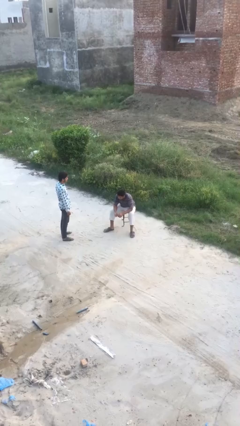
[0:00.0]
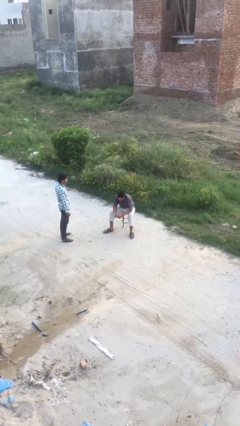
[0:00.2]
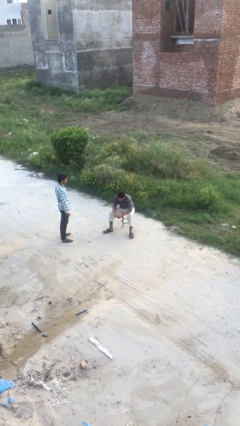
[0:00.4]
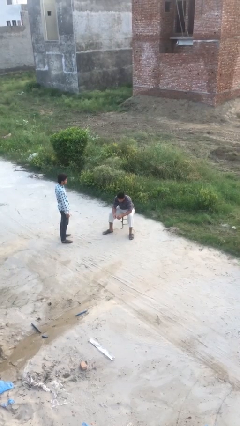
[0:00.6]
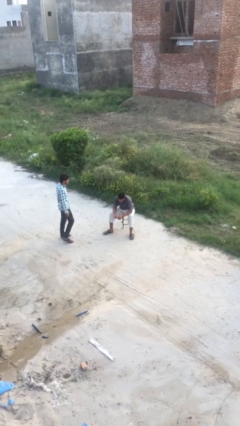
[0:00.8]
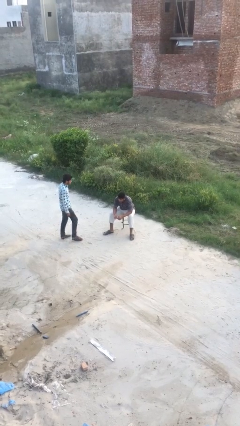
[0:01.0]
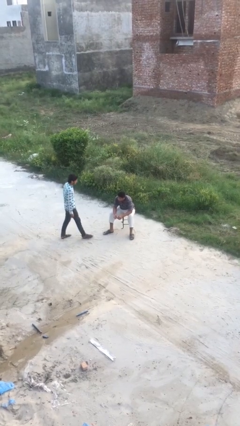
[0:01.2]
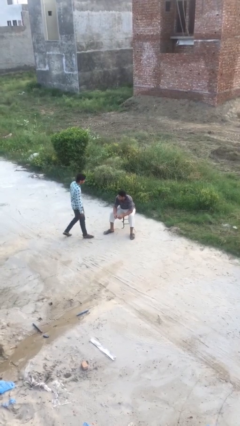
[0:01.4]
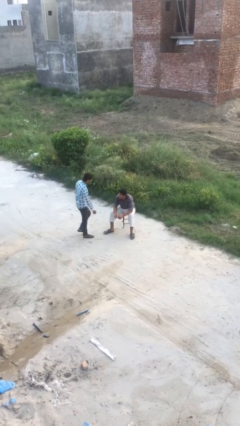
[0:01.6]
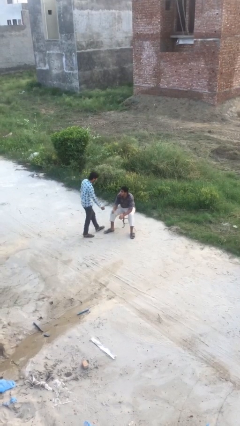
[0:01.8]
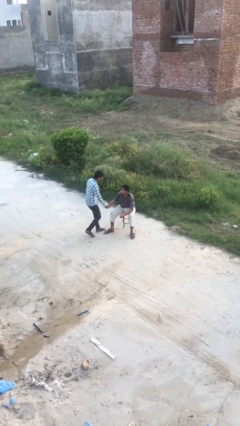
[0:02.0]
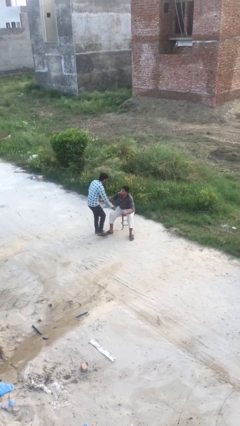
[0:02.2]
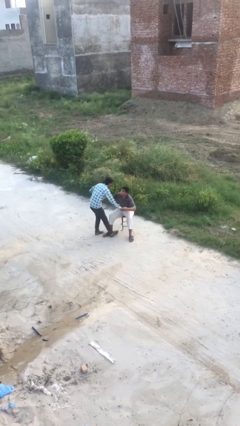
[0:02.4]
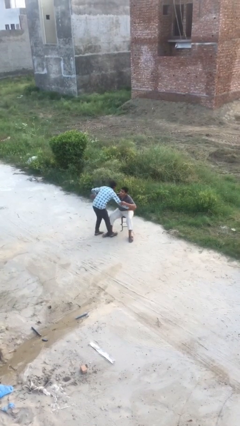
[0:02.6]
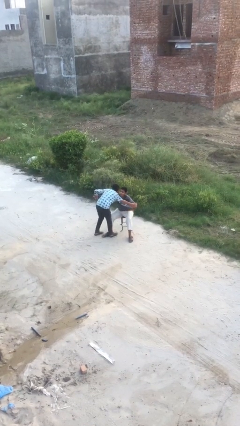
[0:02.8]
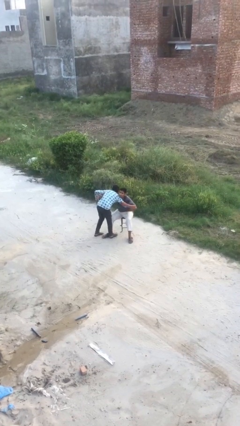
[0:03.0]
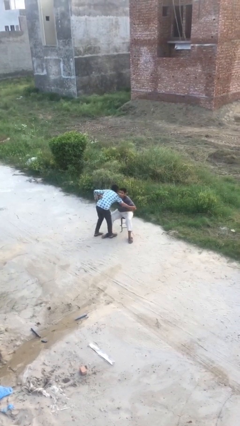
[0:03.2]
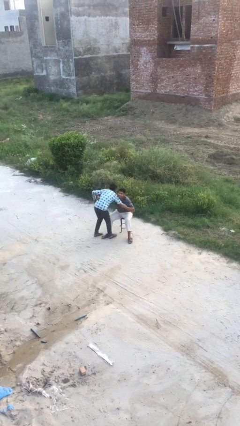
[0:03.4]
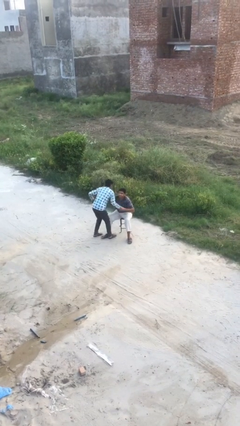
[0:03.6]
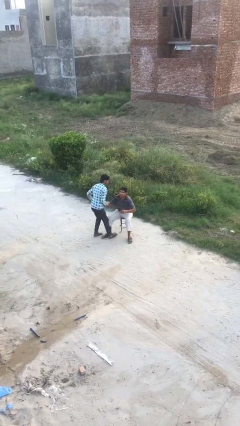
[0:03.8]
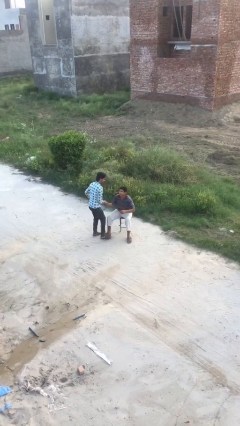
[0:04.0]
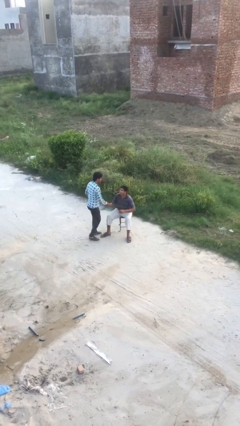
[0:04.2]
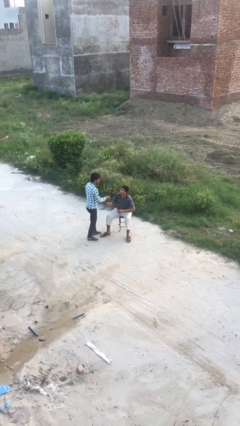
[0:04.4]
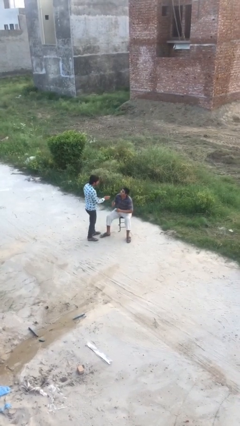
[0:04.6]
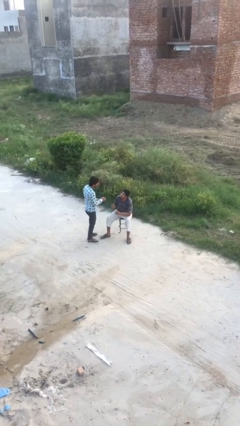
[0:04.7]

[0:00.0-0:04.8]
person embraces person

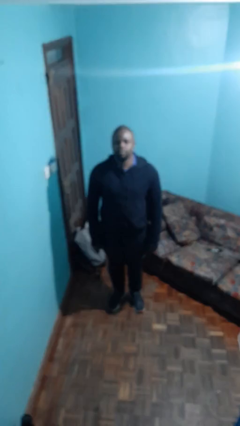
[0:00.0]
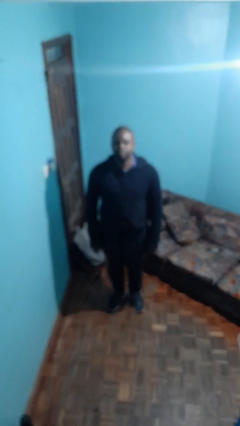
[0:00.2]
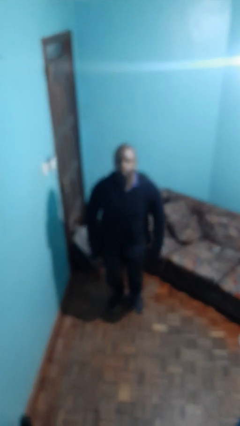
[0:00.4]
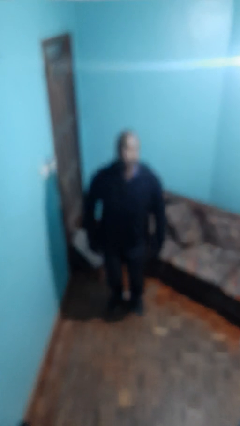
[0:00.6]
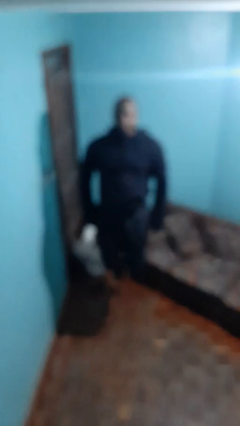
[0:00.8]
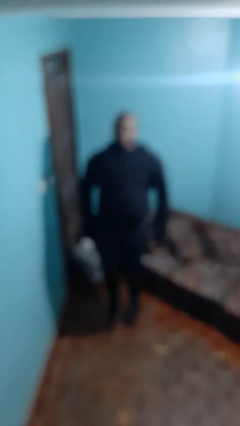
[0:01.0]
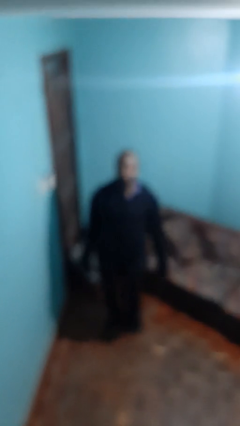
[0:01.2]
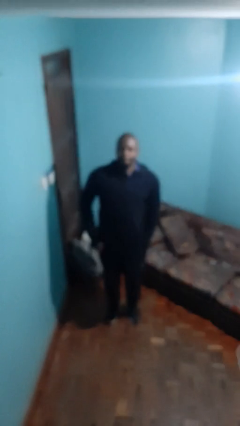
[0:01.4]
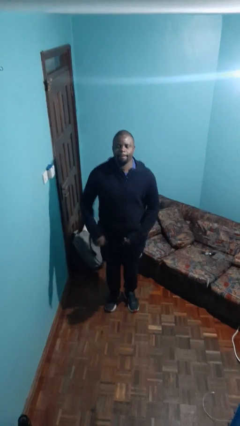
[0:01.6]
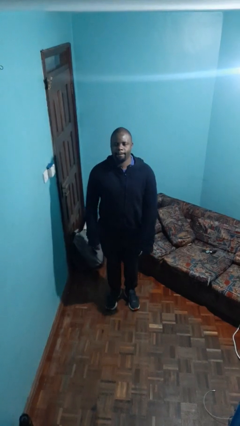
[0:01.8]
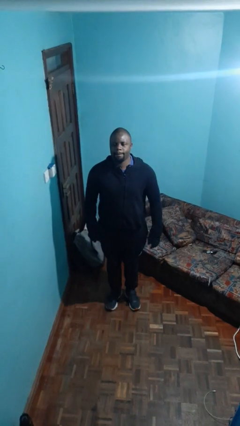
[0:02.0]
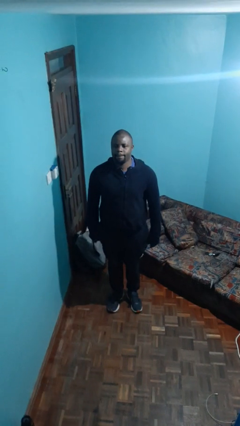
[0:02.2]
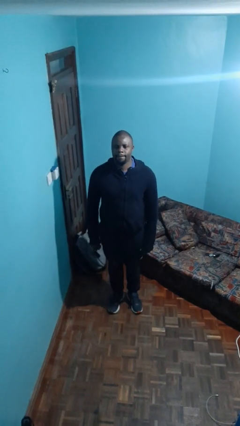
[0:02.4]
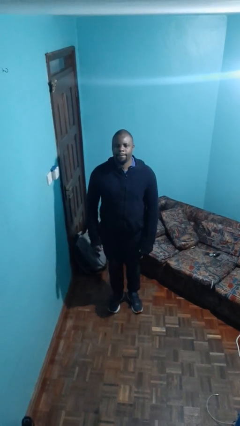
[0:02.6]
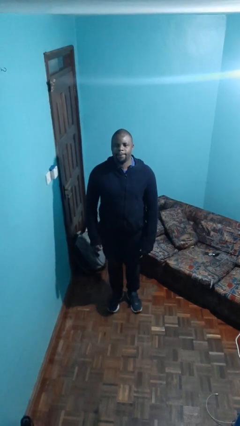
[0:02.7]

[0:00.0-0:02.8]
person jumps

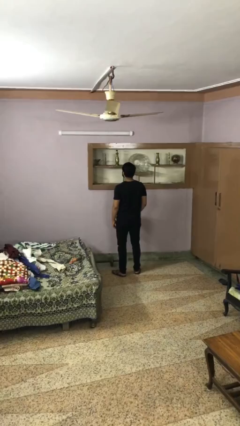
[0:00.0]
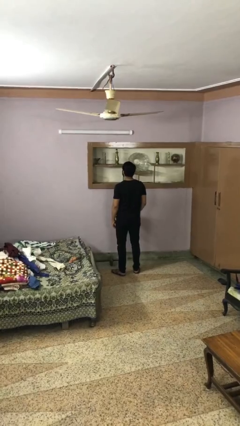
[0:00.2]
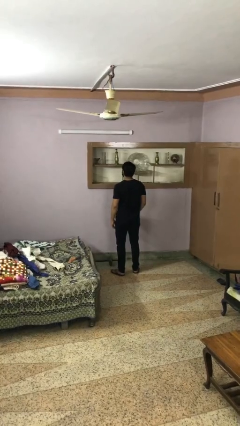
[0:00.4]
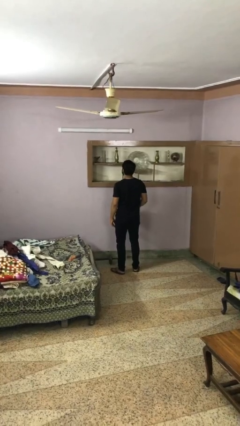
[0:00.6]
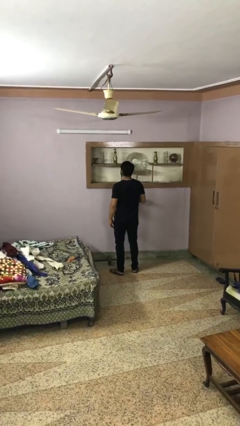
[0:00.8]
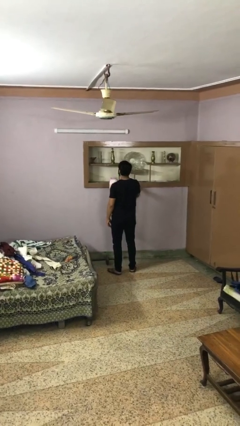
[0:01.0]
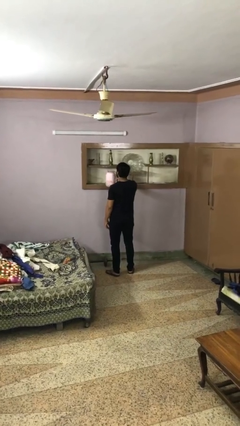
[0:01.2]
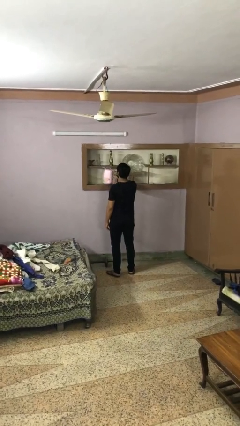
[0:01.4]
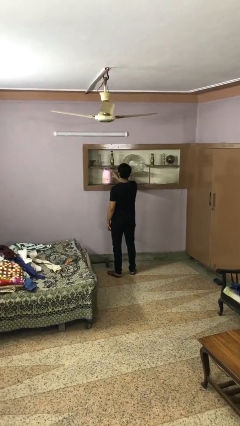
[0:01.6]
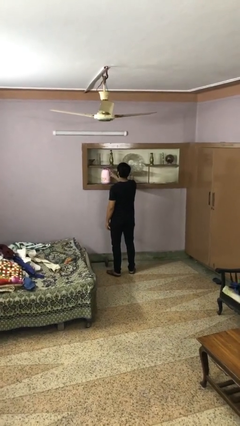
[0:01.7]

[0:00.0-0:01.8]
person puts down object on countertop

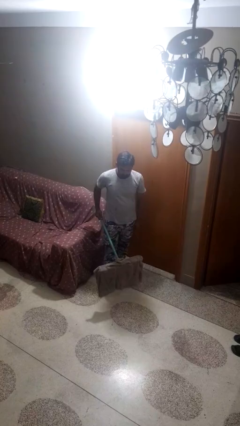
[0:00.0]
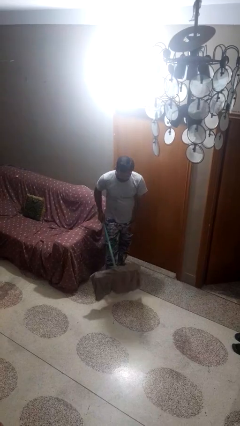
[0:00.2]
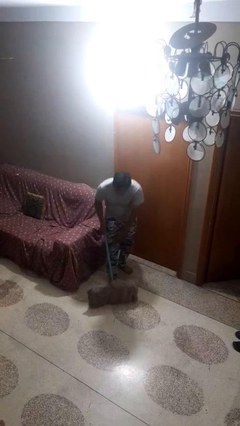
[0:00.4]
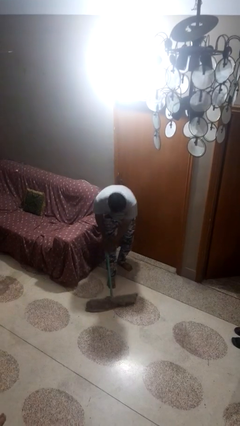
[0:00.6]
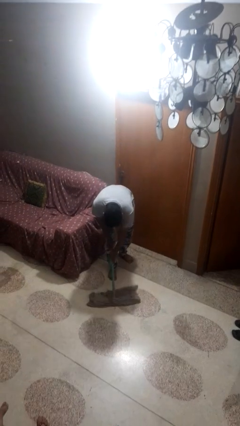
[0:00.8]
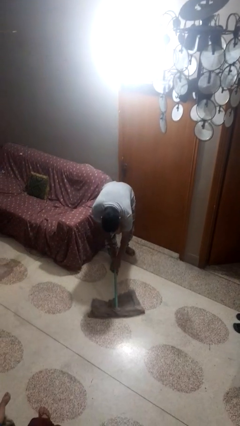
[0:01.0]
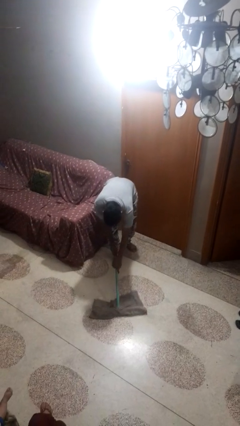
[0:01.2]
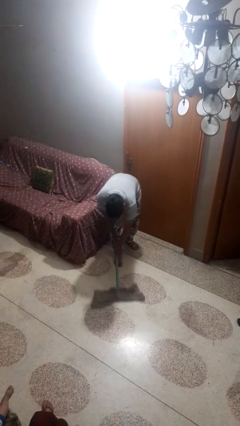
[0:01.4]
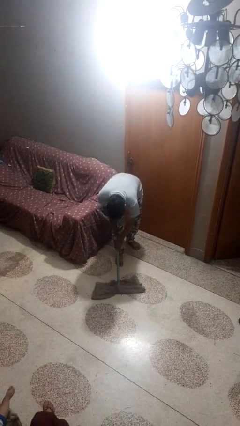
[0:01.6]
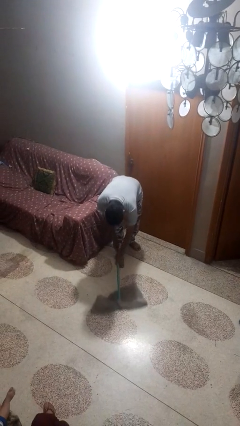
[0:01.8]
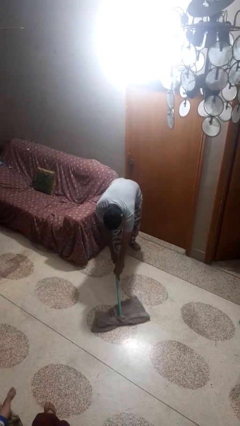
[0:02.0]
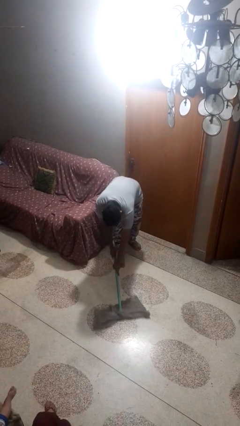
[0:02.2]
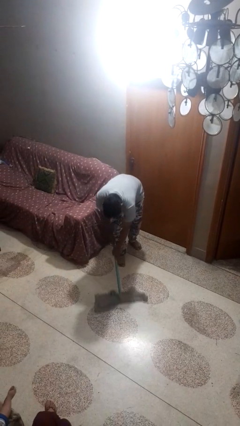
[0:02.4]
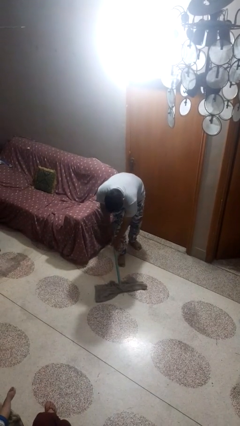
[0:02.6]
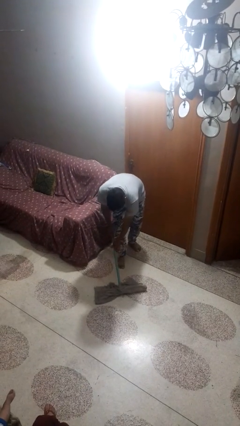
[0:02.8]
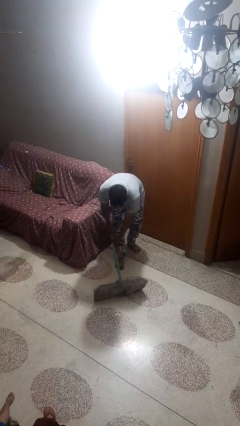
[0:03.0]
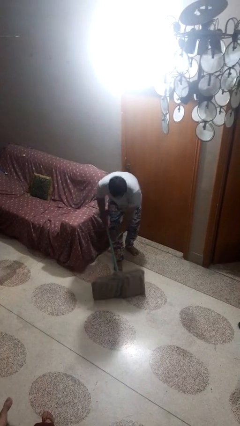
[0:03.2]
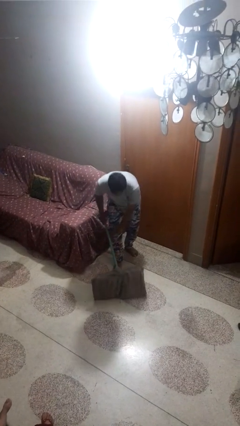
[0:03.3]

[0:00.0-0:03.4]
person mops

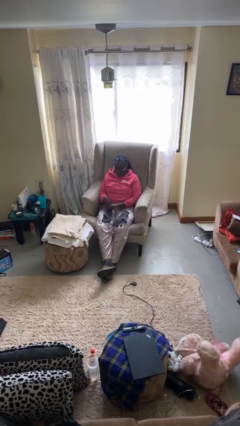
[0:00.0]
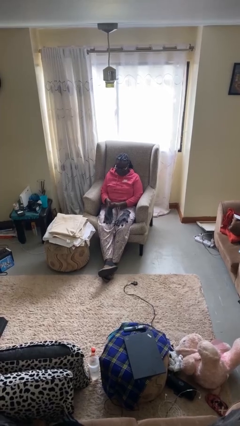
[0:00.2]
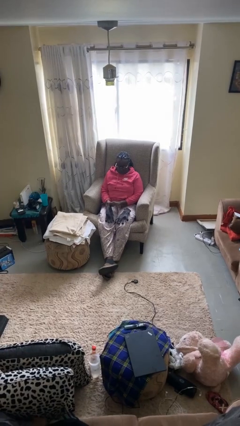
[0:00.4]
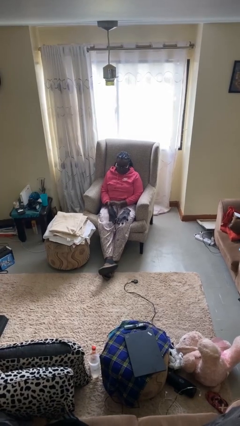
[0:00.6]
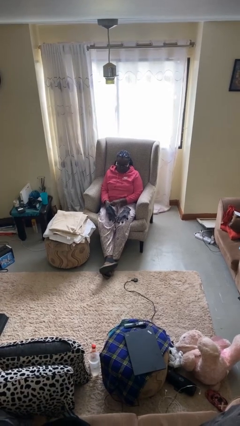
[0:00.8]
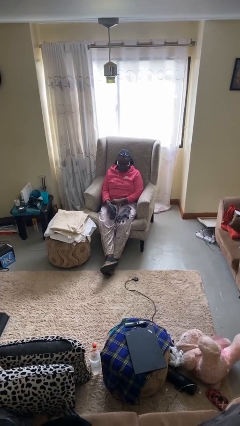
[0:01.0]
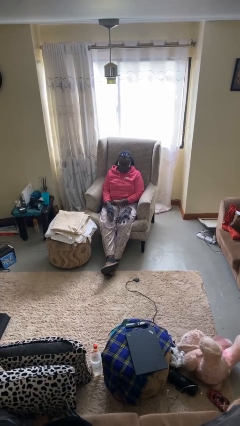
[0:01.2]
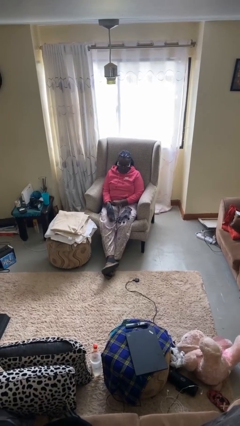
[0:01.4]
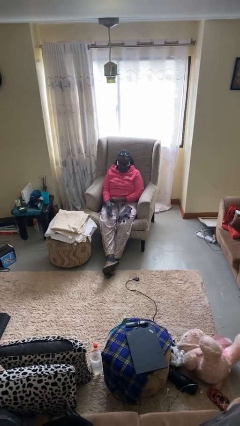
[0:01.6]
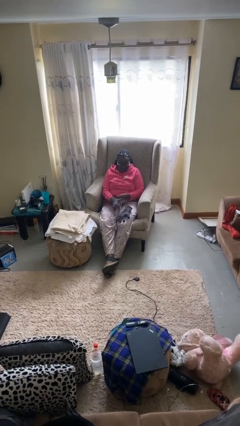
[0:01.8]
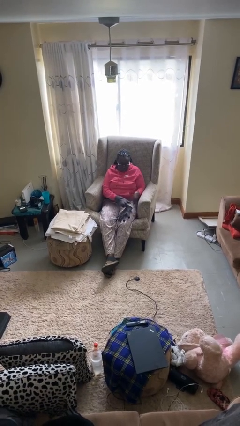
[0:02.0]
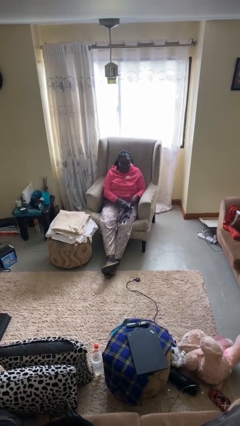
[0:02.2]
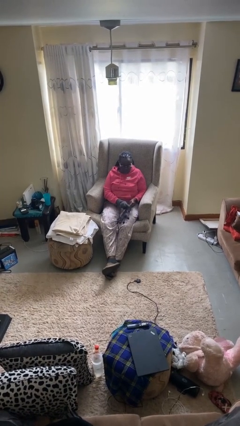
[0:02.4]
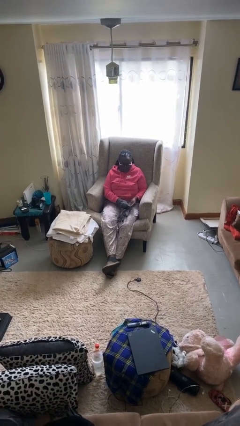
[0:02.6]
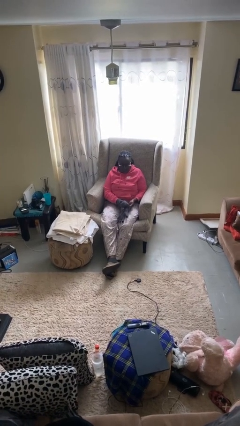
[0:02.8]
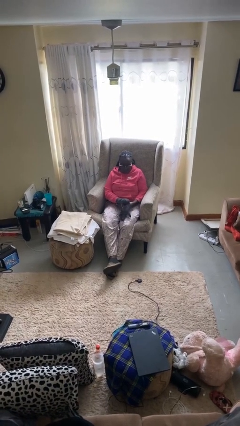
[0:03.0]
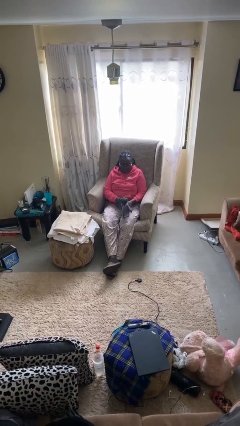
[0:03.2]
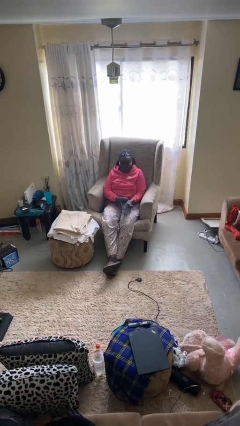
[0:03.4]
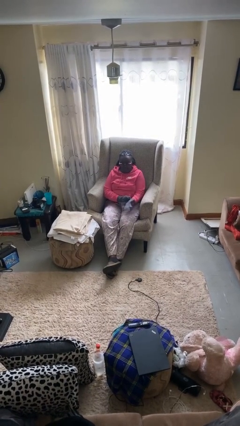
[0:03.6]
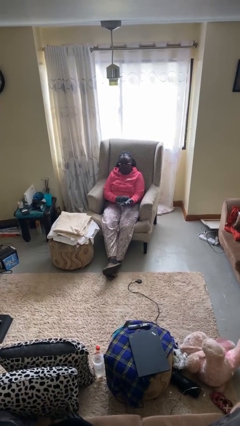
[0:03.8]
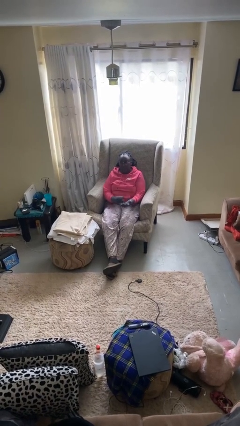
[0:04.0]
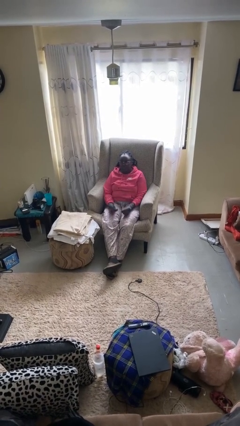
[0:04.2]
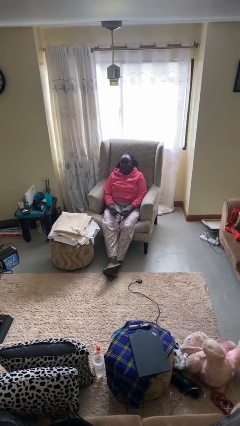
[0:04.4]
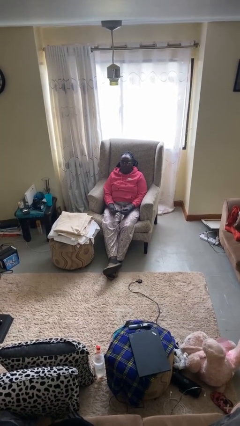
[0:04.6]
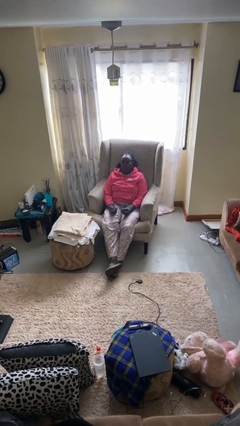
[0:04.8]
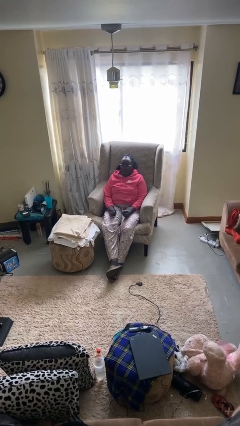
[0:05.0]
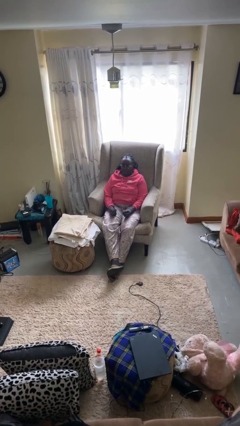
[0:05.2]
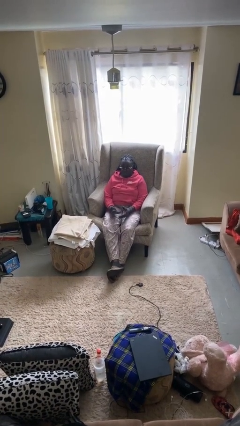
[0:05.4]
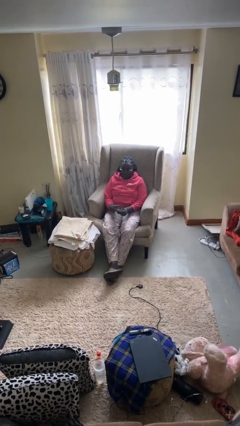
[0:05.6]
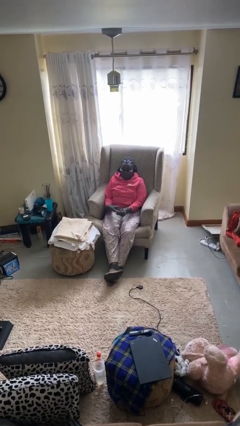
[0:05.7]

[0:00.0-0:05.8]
person puts on gloves
